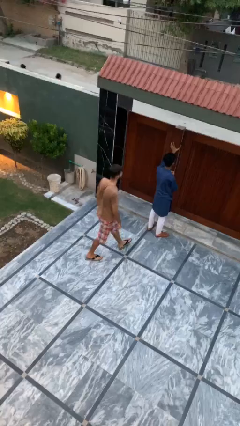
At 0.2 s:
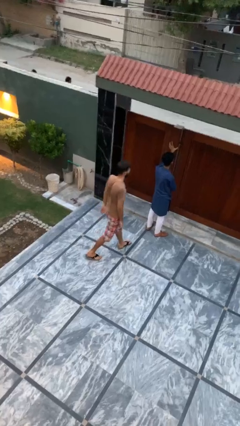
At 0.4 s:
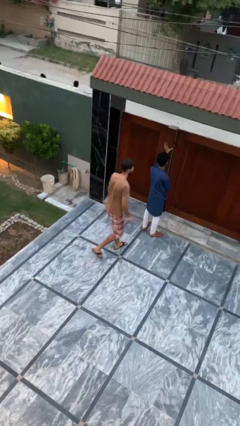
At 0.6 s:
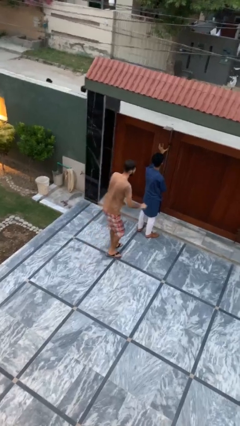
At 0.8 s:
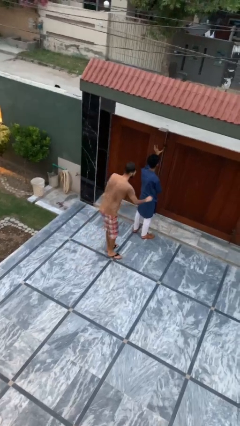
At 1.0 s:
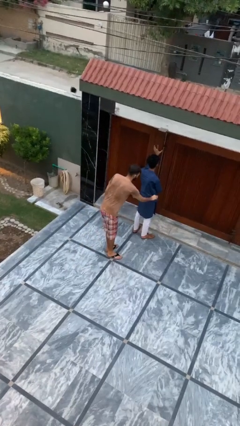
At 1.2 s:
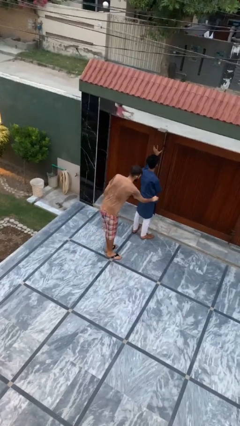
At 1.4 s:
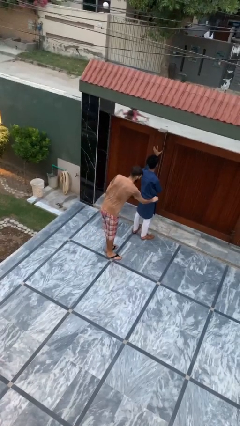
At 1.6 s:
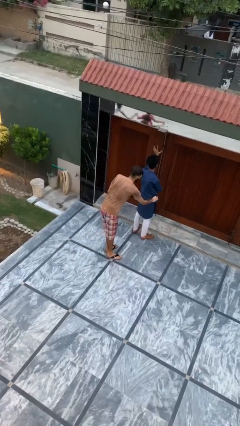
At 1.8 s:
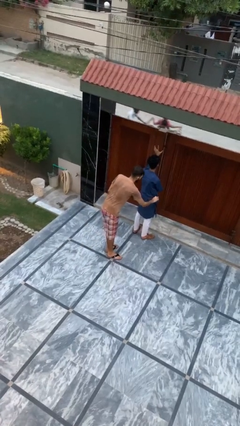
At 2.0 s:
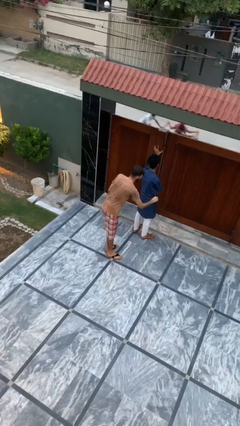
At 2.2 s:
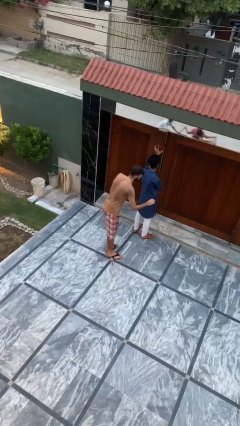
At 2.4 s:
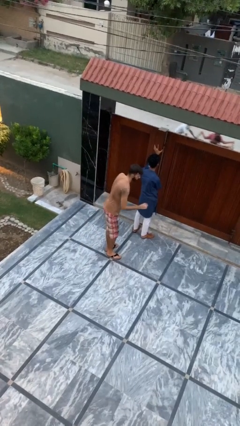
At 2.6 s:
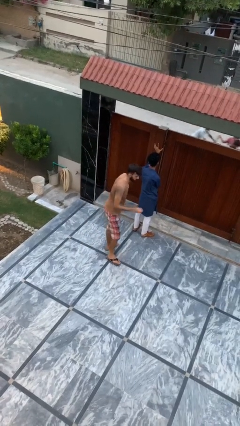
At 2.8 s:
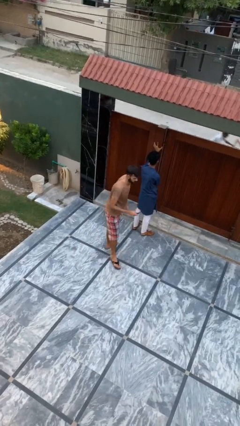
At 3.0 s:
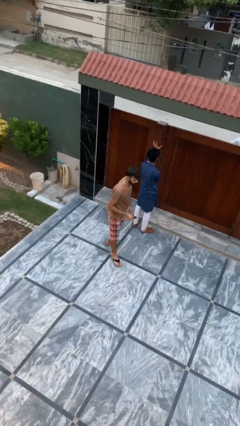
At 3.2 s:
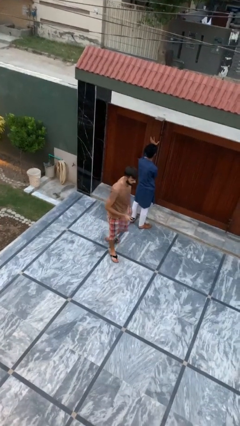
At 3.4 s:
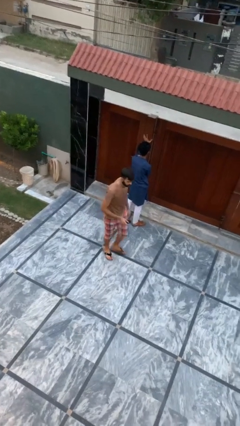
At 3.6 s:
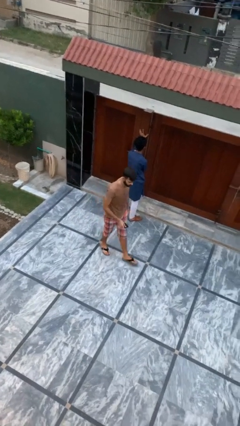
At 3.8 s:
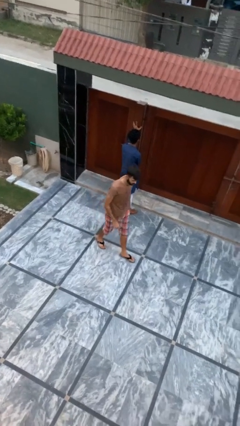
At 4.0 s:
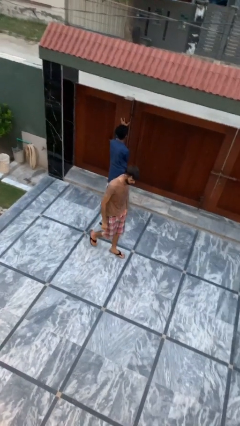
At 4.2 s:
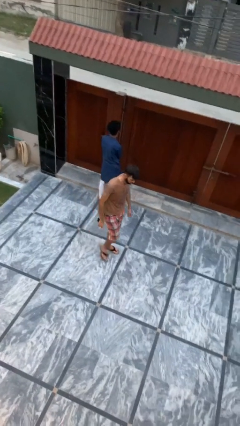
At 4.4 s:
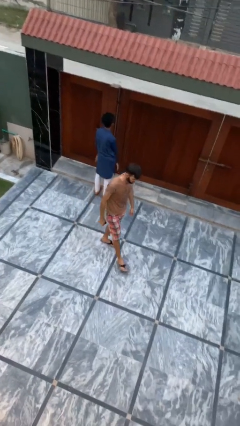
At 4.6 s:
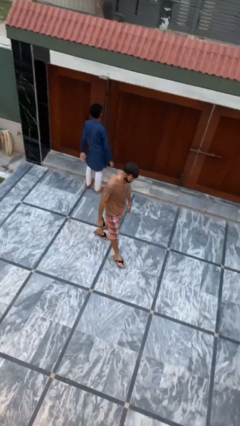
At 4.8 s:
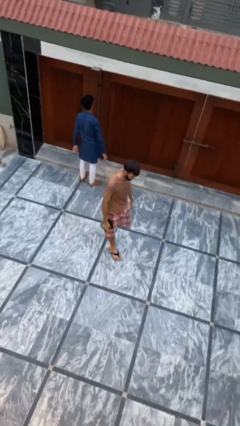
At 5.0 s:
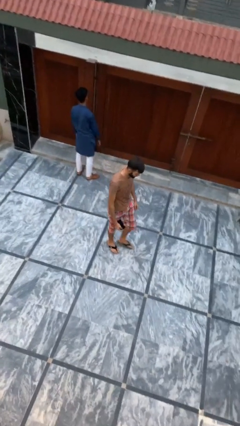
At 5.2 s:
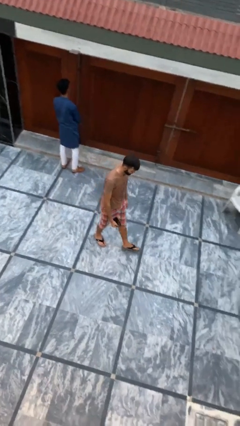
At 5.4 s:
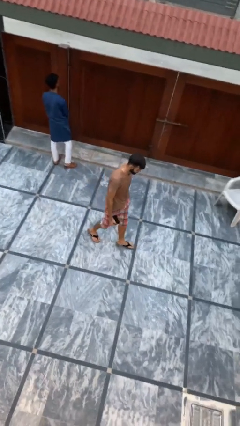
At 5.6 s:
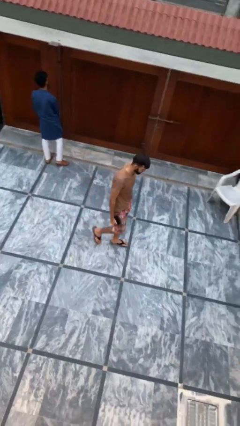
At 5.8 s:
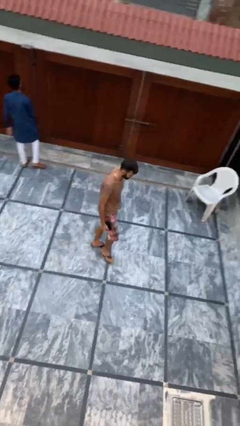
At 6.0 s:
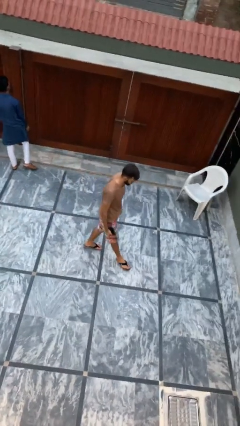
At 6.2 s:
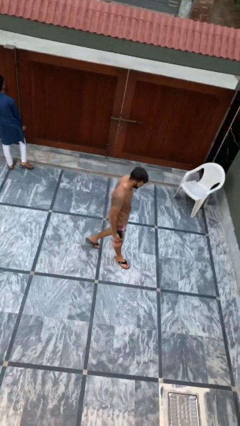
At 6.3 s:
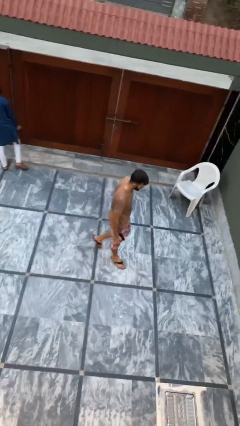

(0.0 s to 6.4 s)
person steals object from person

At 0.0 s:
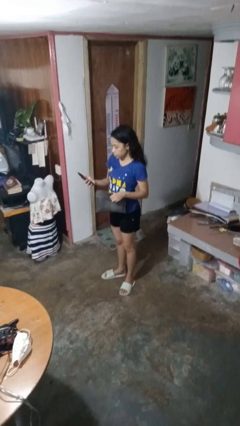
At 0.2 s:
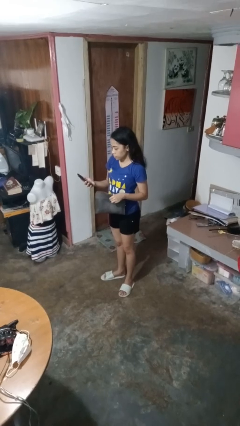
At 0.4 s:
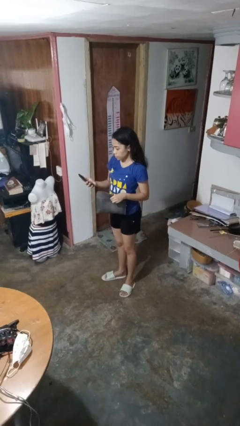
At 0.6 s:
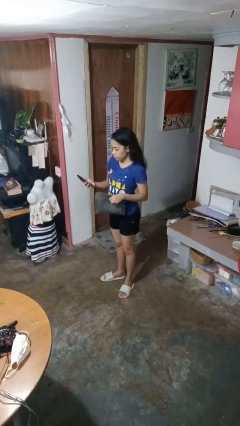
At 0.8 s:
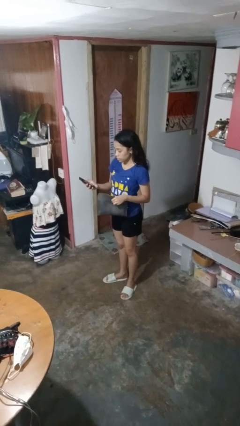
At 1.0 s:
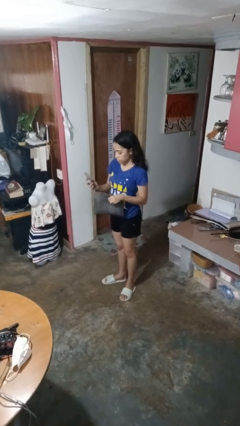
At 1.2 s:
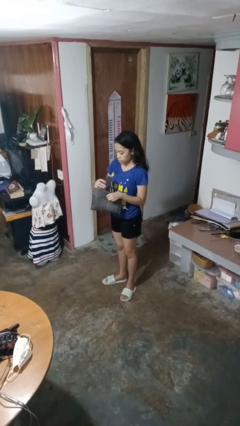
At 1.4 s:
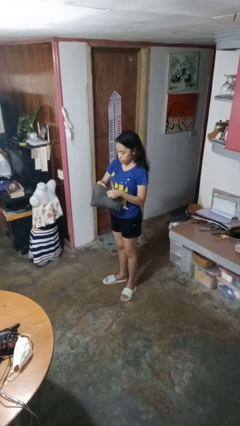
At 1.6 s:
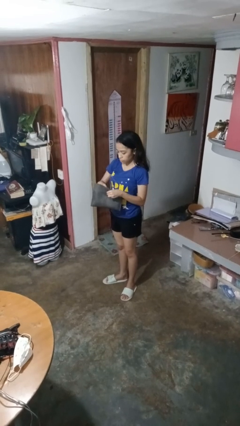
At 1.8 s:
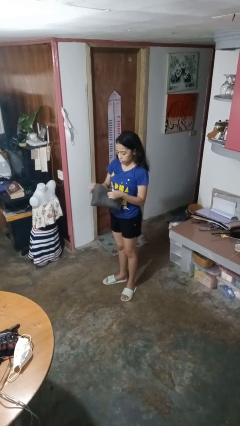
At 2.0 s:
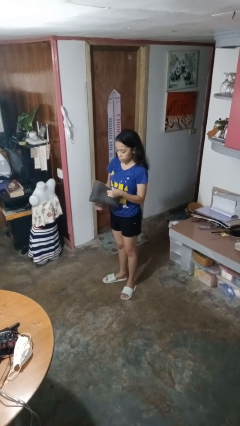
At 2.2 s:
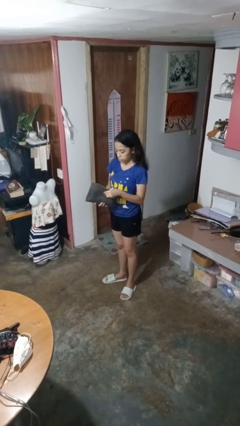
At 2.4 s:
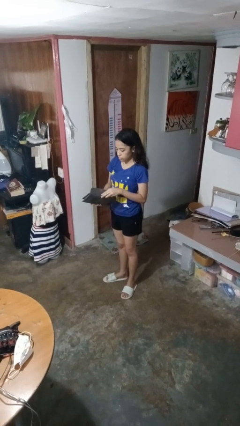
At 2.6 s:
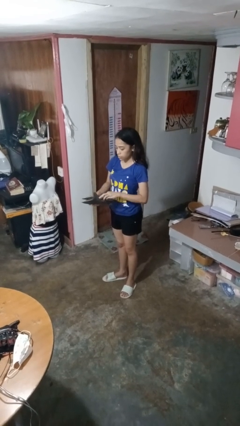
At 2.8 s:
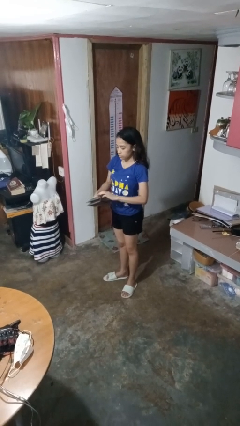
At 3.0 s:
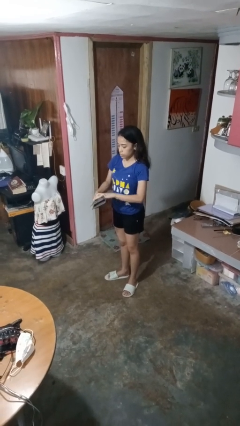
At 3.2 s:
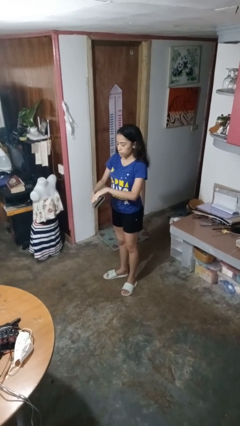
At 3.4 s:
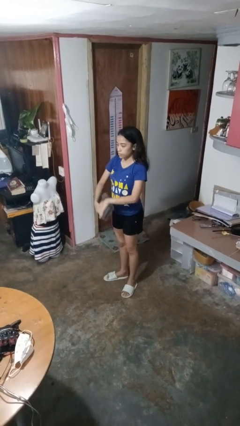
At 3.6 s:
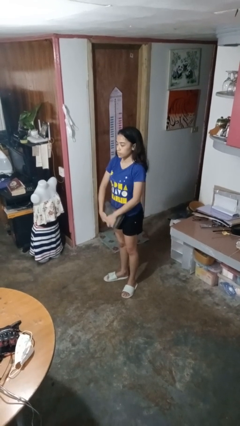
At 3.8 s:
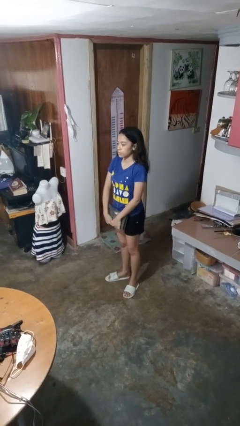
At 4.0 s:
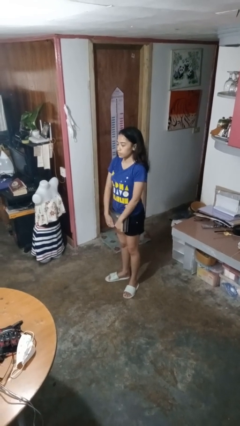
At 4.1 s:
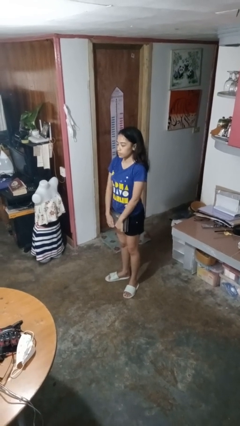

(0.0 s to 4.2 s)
person puts object into purse

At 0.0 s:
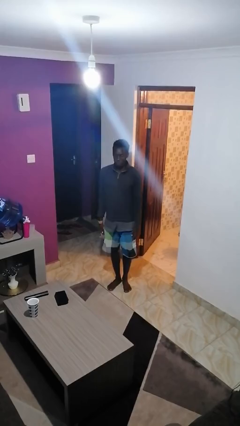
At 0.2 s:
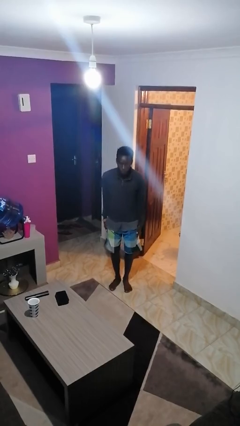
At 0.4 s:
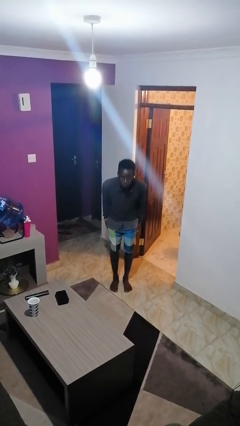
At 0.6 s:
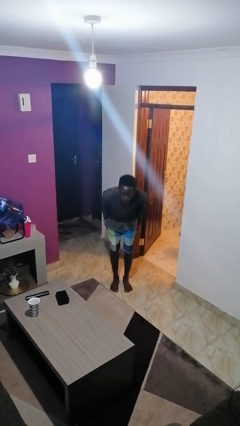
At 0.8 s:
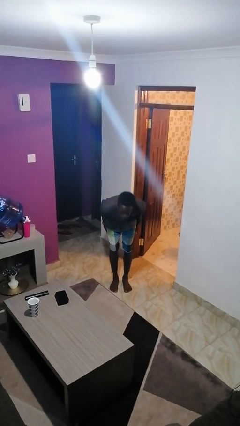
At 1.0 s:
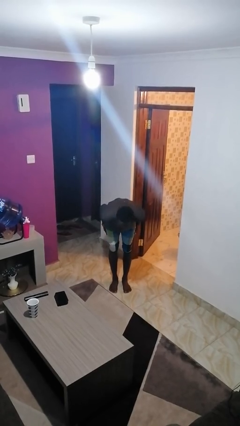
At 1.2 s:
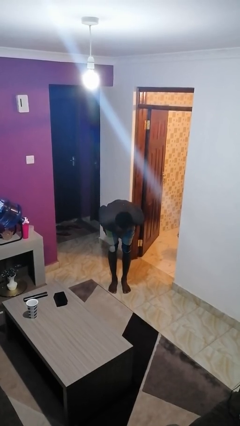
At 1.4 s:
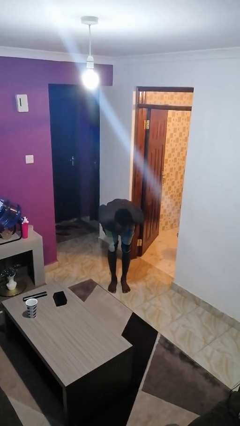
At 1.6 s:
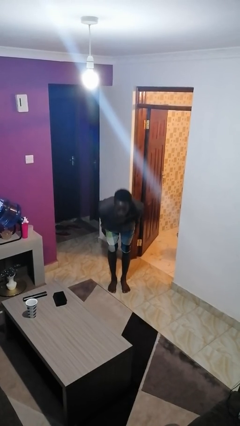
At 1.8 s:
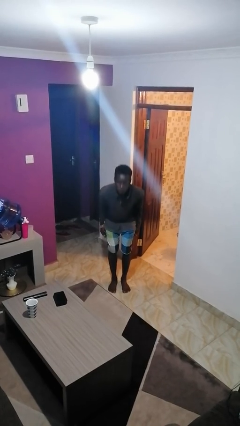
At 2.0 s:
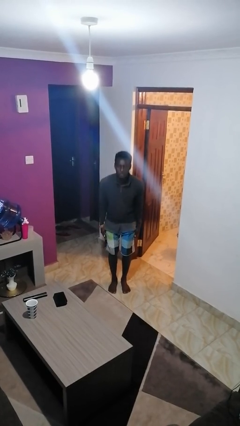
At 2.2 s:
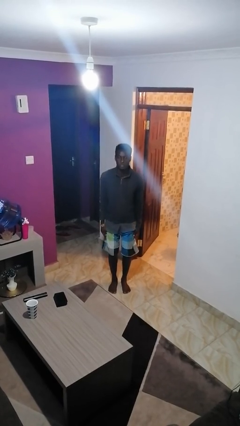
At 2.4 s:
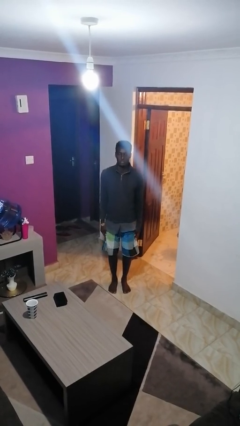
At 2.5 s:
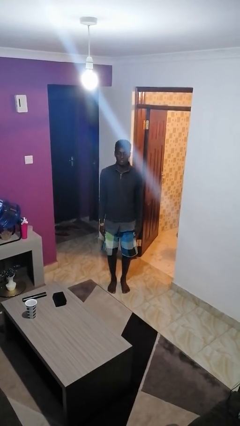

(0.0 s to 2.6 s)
person bows

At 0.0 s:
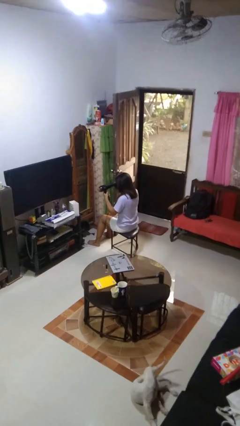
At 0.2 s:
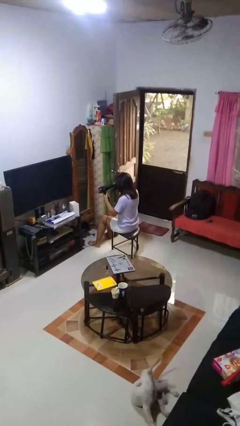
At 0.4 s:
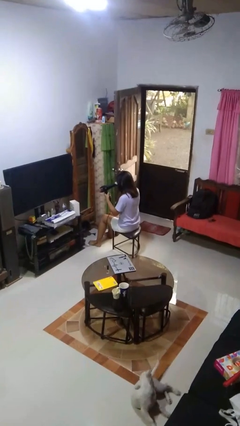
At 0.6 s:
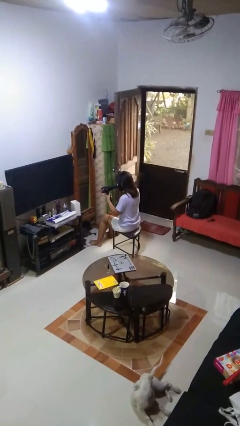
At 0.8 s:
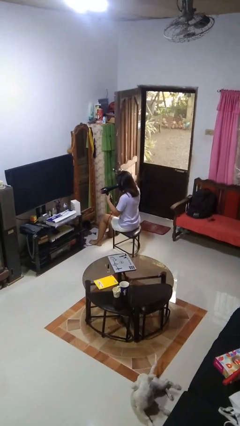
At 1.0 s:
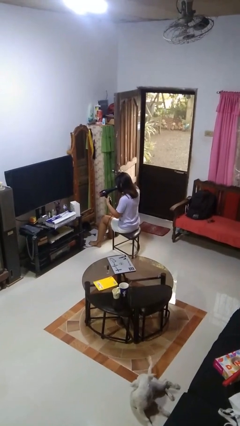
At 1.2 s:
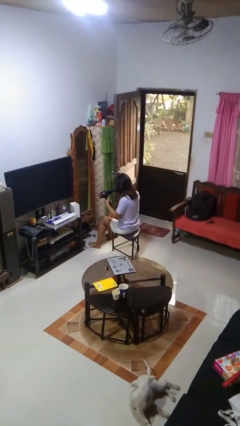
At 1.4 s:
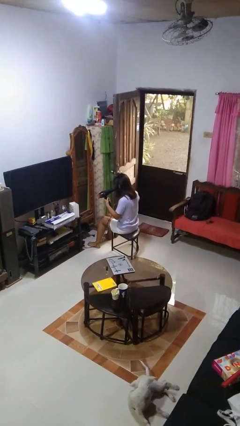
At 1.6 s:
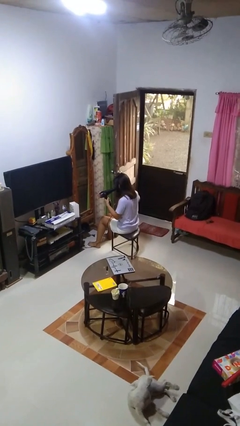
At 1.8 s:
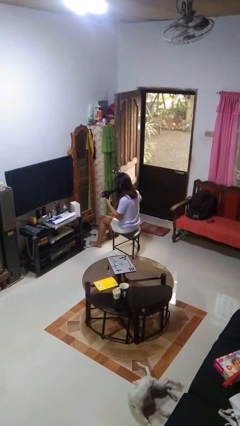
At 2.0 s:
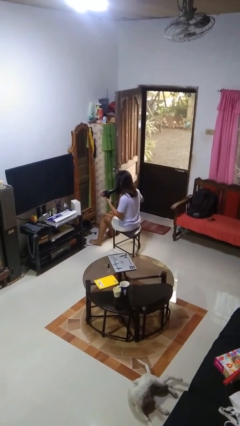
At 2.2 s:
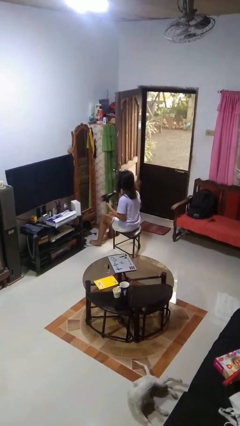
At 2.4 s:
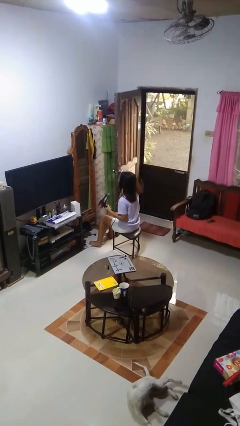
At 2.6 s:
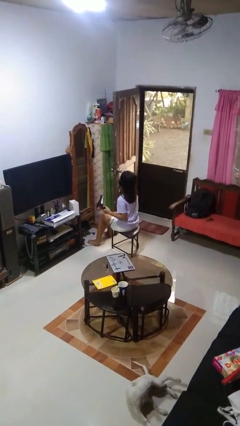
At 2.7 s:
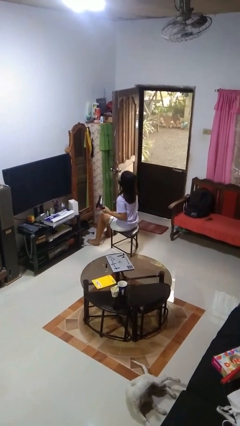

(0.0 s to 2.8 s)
person dries hair with hairdryer

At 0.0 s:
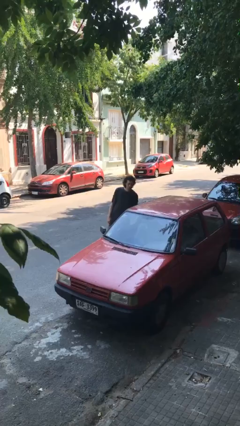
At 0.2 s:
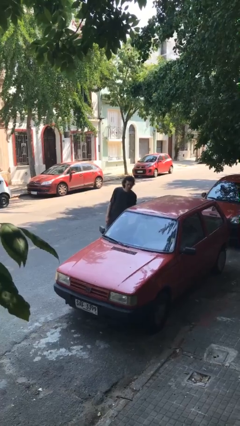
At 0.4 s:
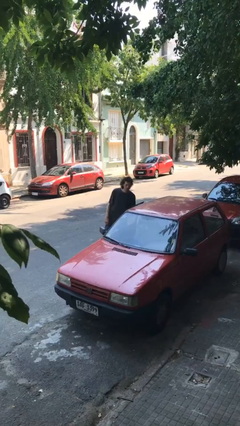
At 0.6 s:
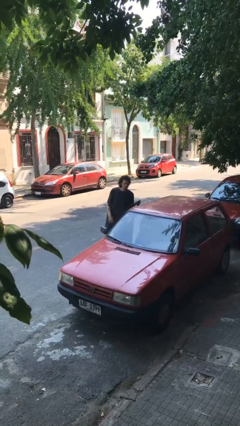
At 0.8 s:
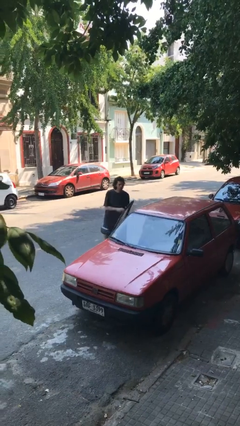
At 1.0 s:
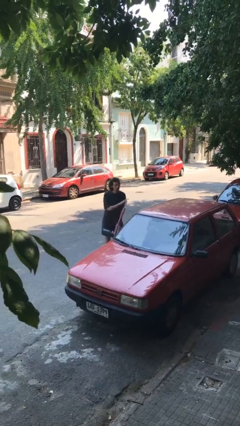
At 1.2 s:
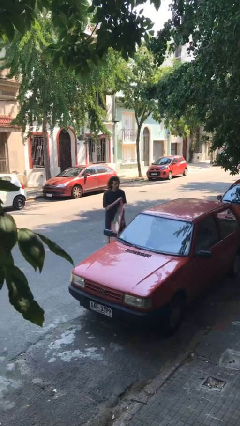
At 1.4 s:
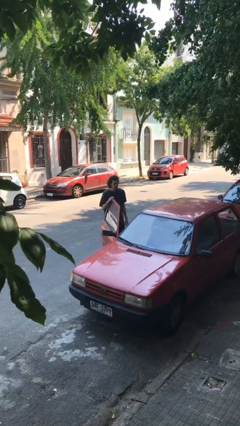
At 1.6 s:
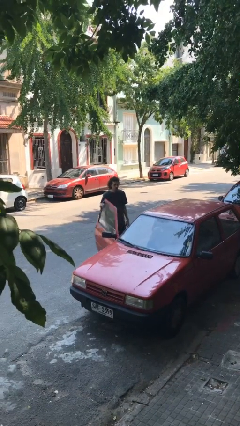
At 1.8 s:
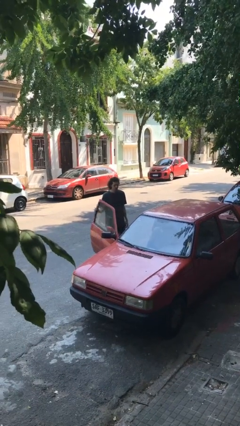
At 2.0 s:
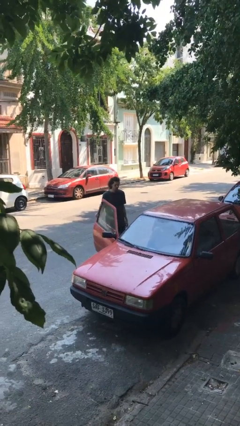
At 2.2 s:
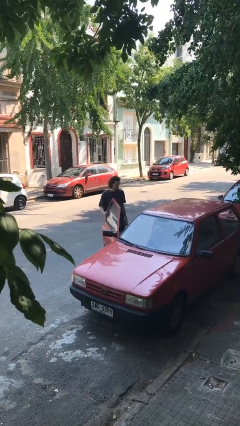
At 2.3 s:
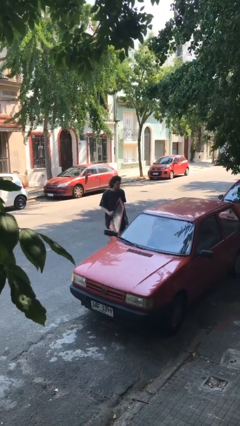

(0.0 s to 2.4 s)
person opens car door
